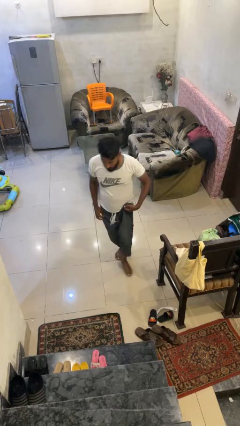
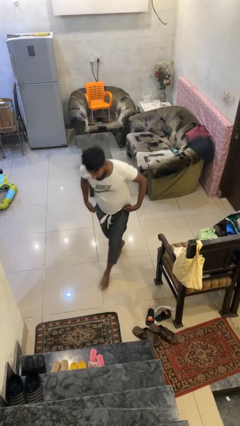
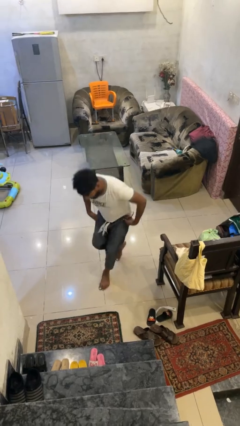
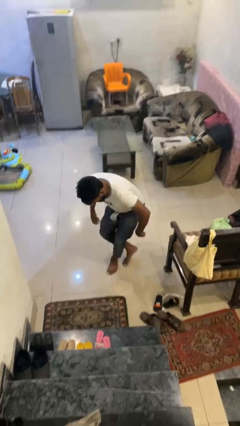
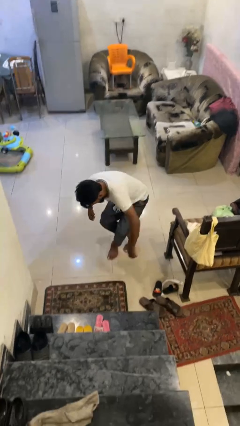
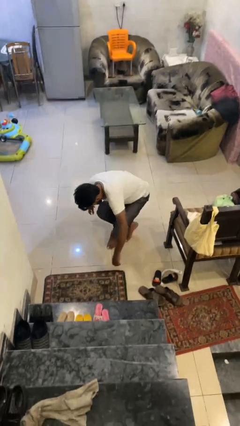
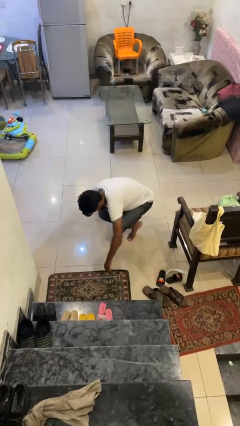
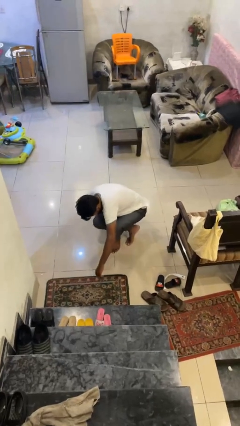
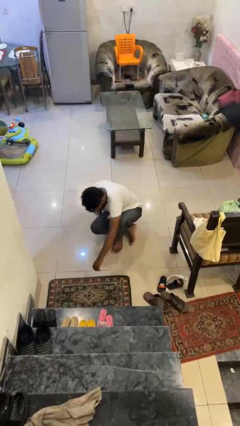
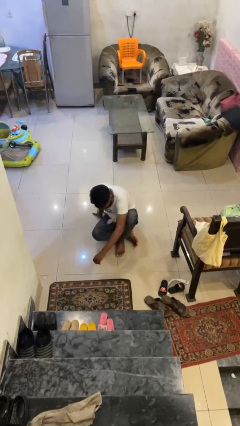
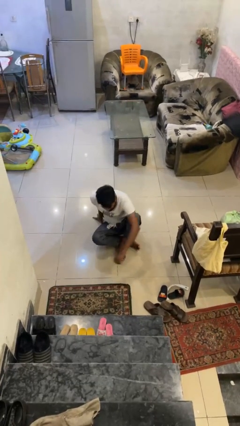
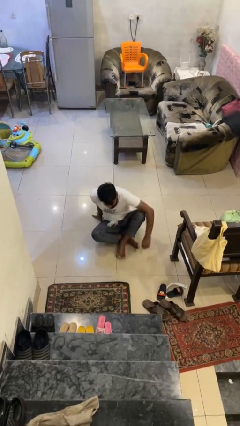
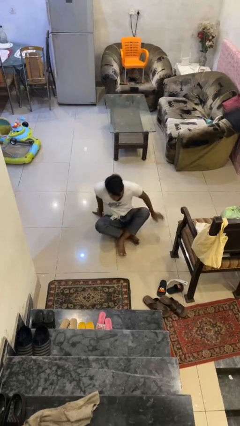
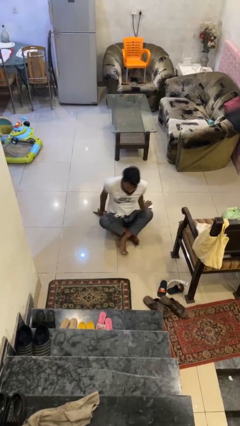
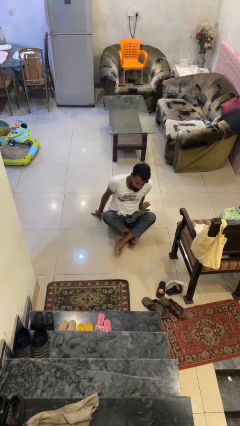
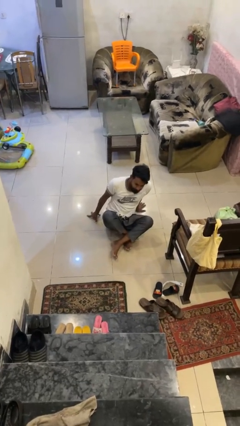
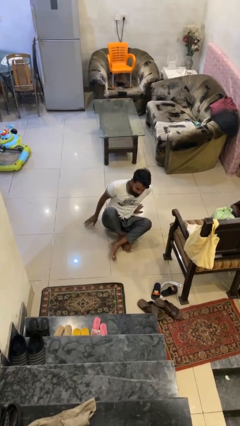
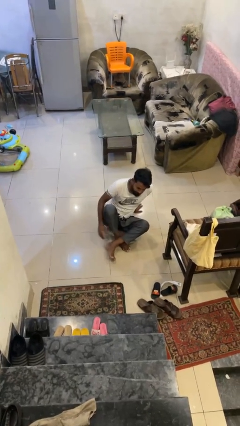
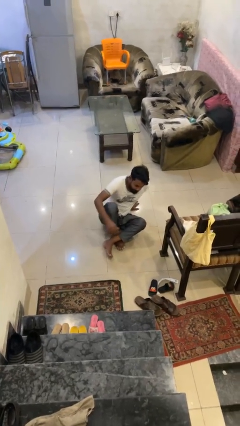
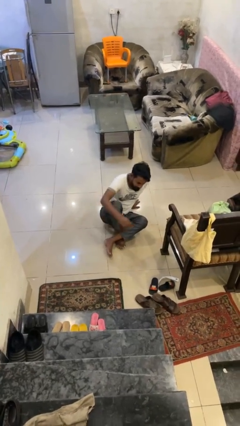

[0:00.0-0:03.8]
person sits crisscross

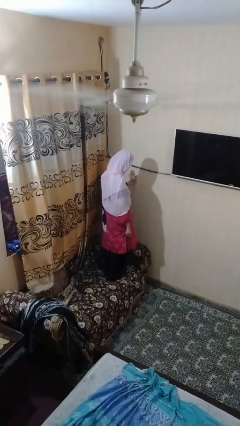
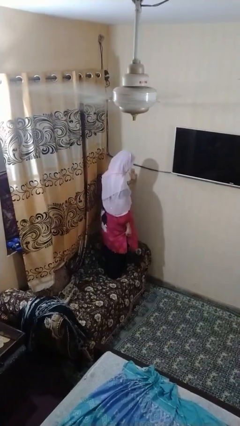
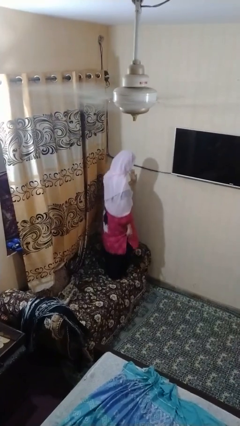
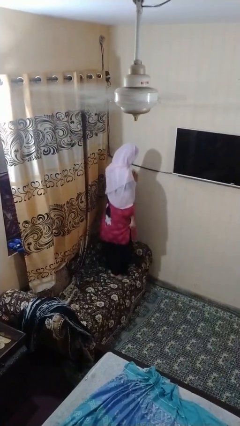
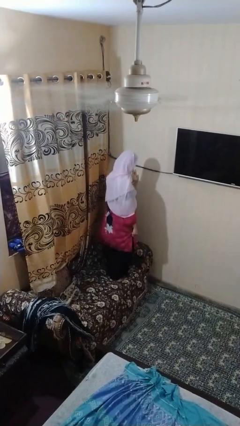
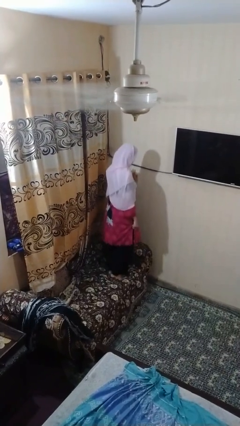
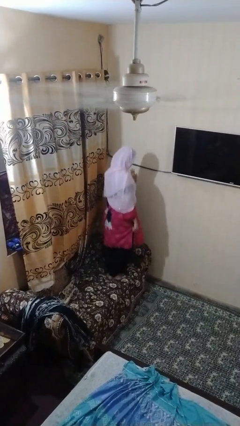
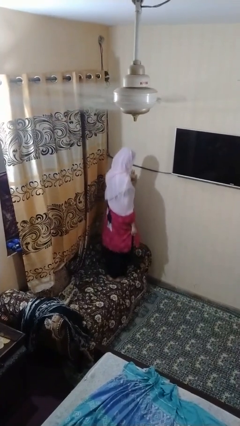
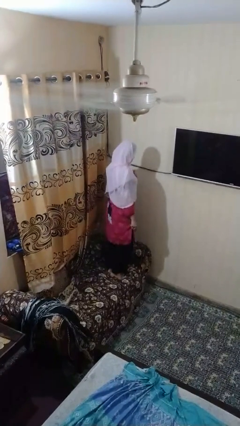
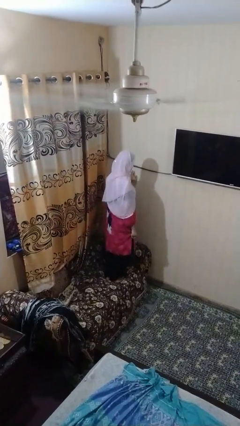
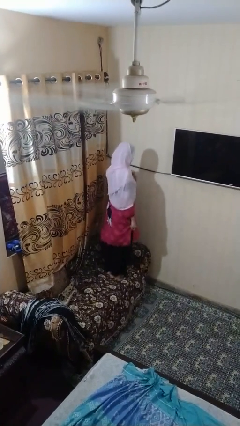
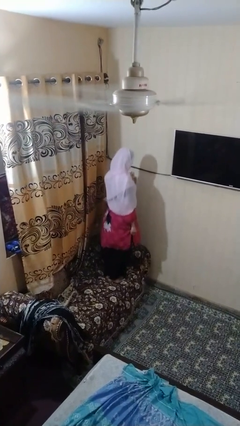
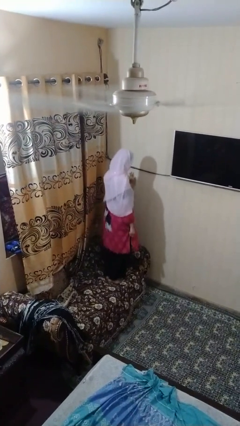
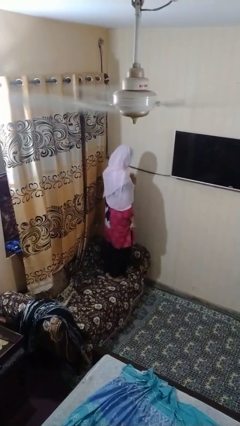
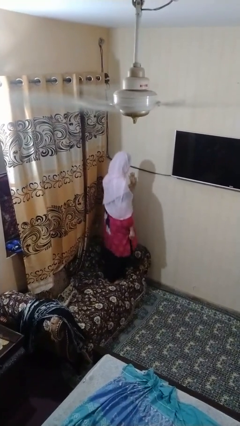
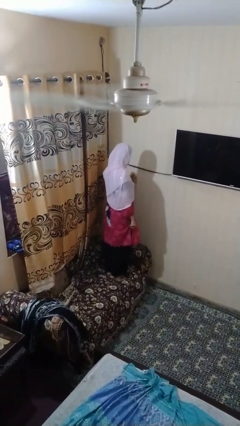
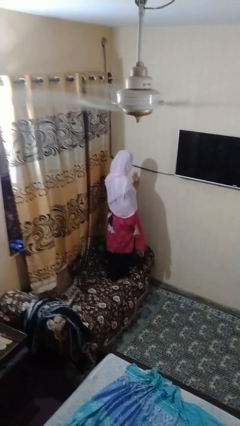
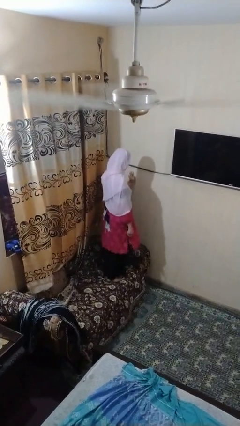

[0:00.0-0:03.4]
person jumps on couch

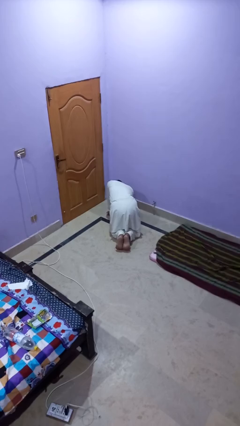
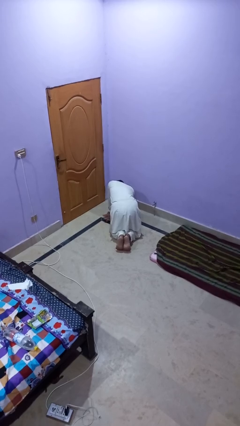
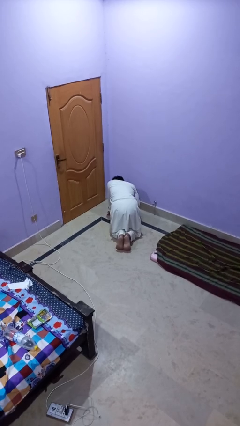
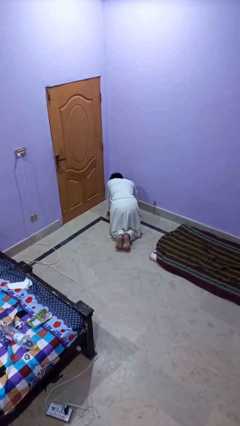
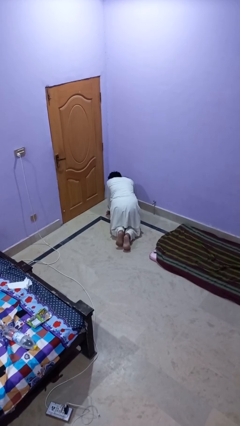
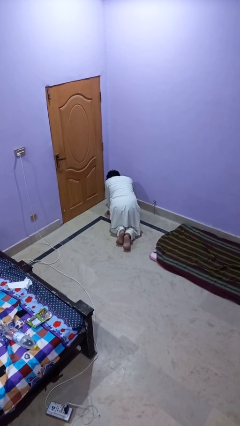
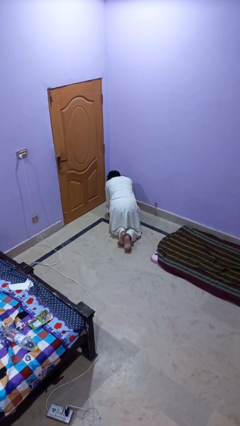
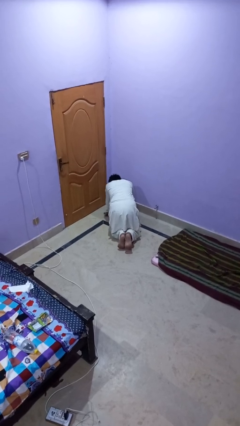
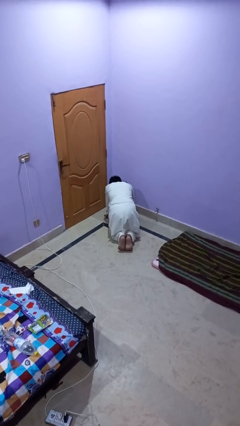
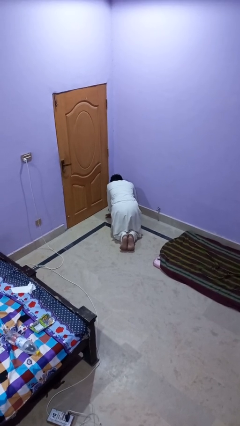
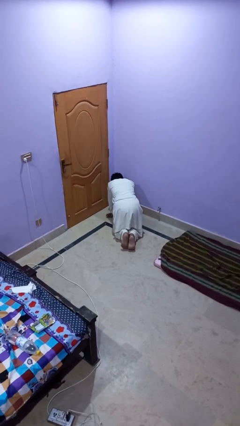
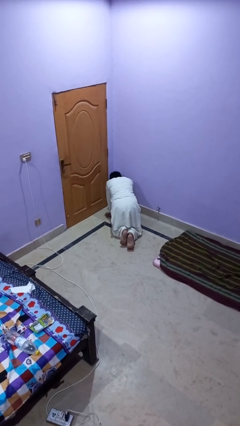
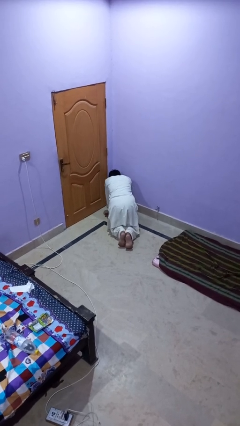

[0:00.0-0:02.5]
person crawls

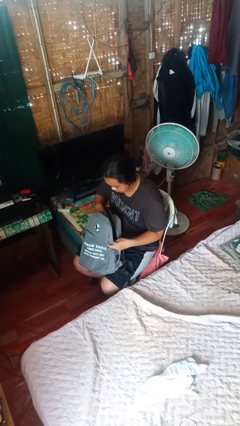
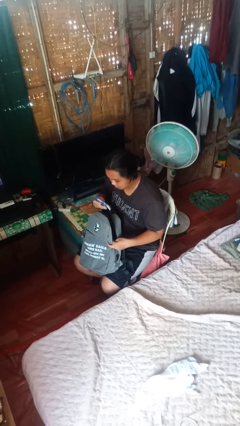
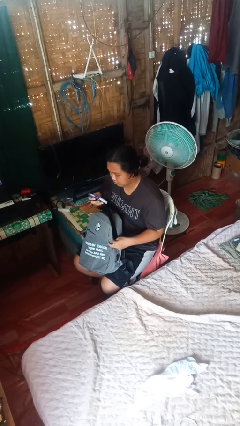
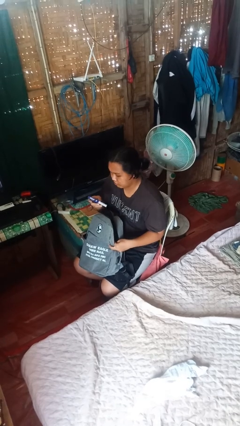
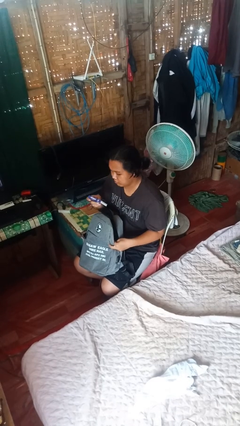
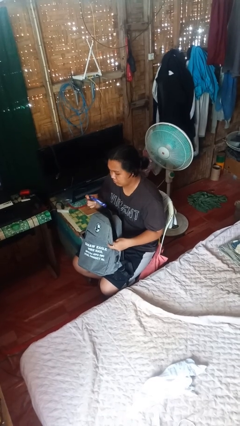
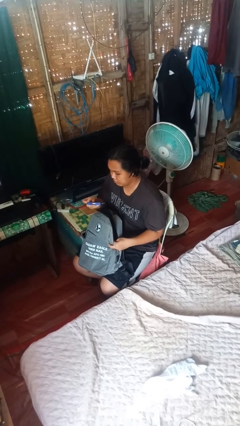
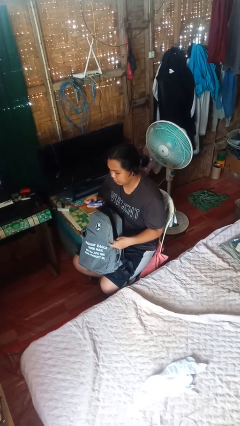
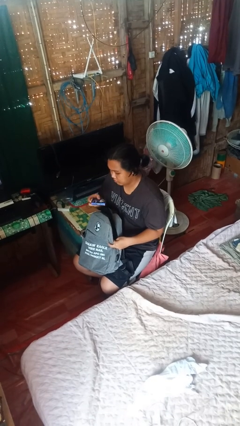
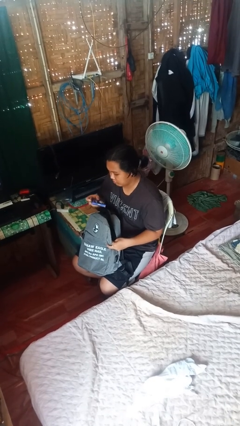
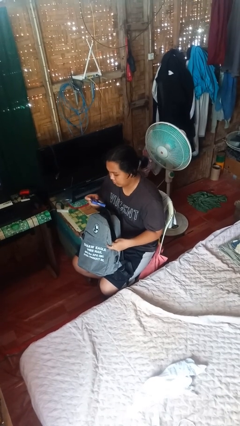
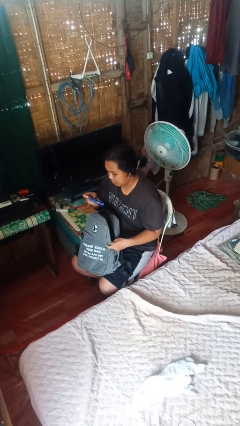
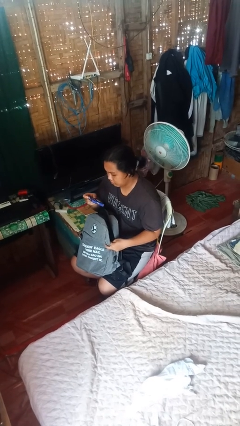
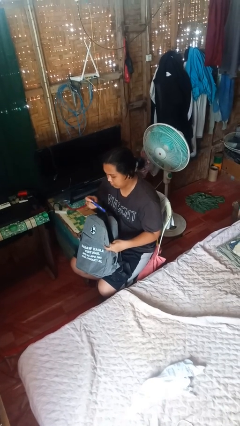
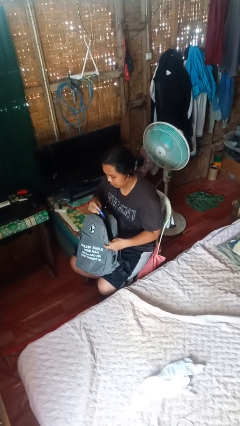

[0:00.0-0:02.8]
person takes object from backpack

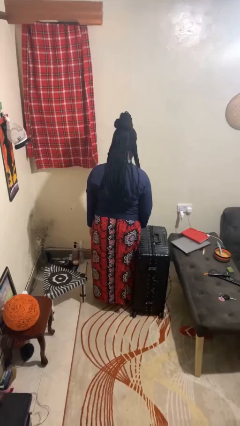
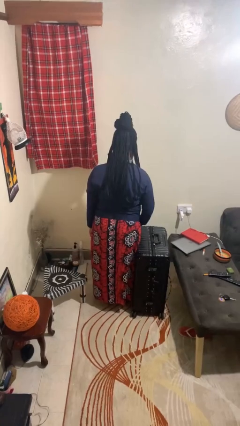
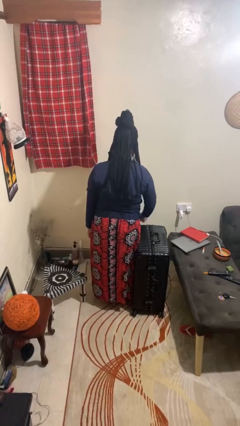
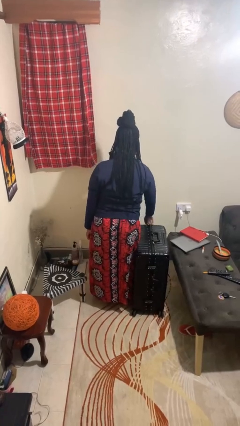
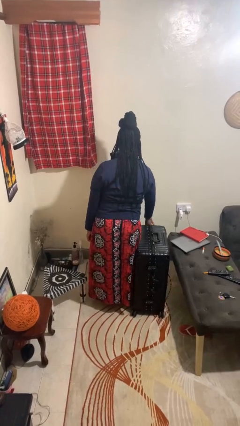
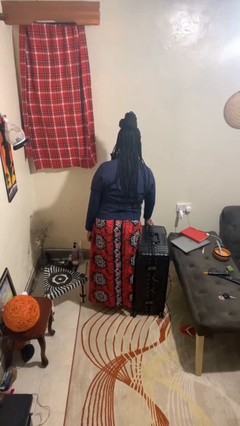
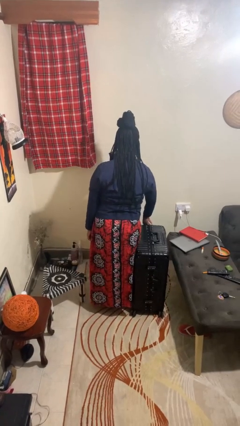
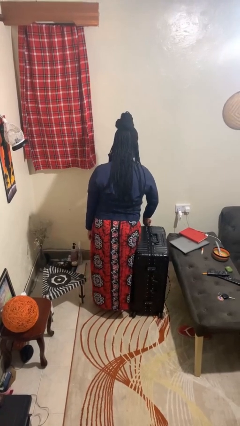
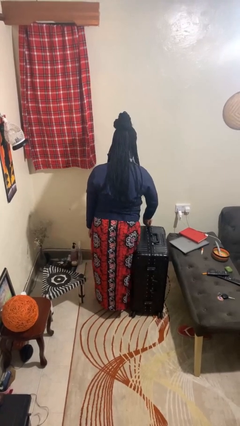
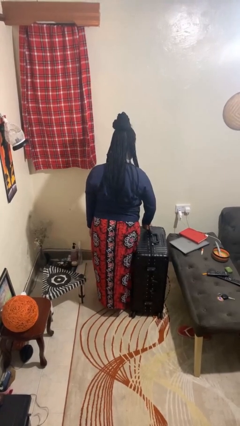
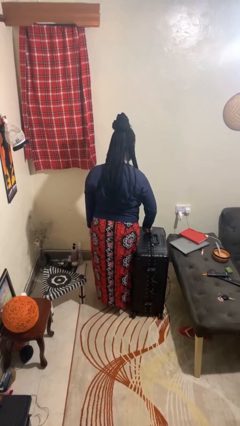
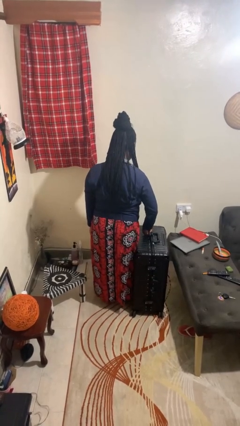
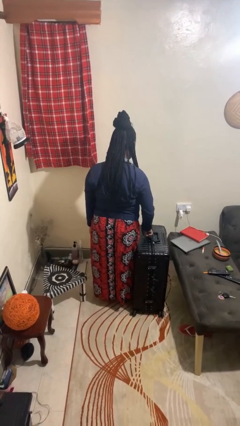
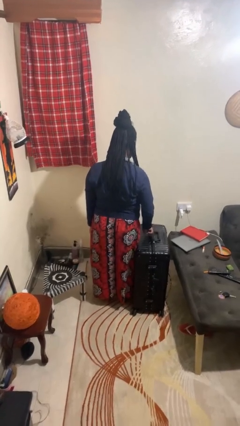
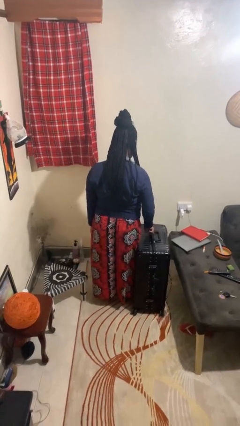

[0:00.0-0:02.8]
person opens suitcase

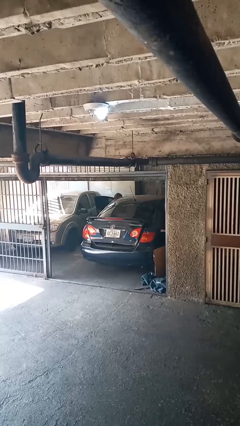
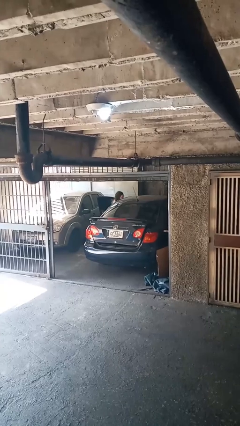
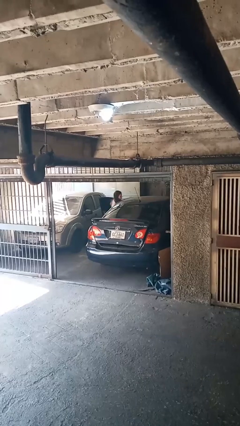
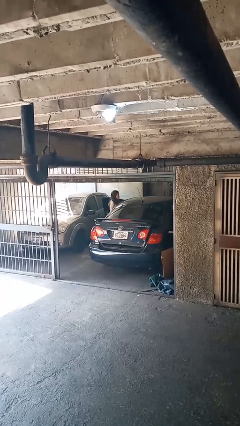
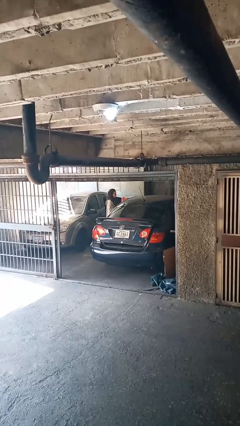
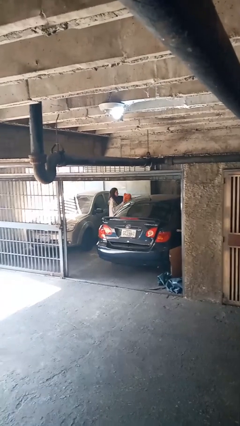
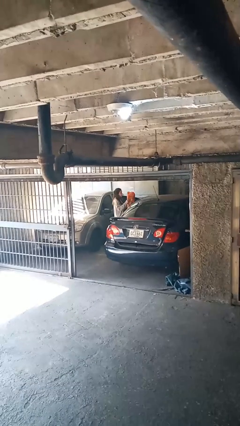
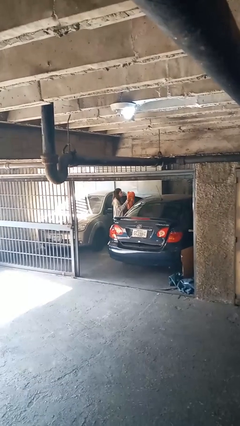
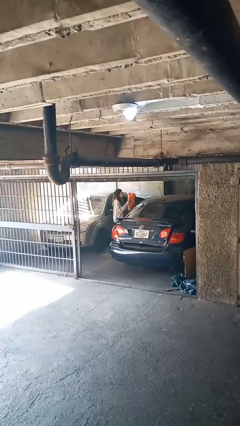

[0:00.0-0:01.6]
person unloads car

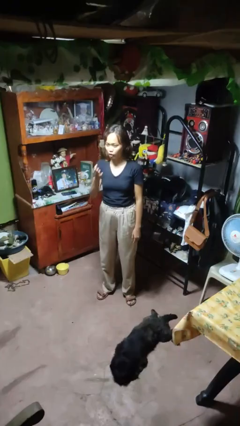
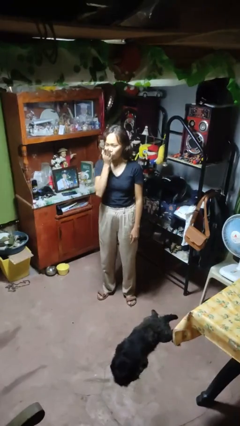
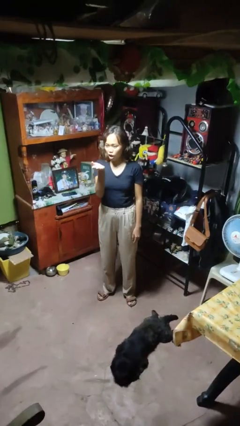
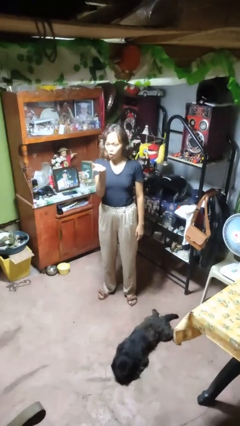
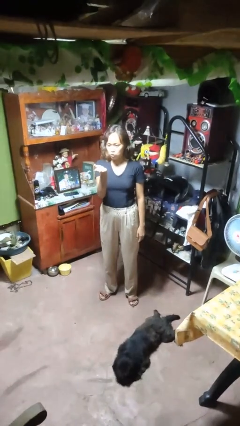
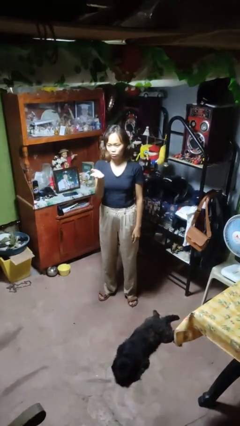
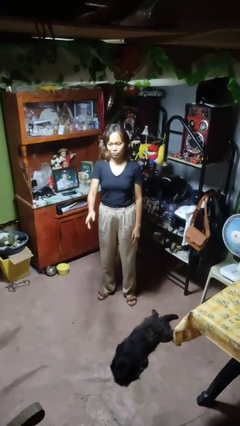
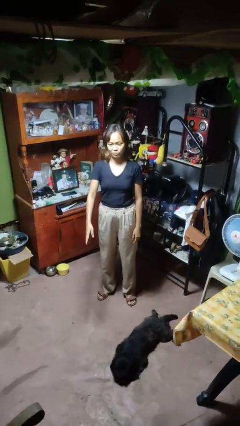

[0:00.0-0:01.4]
person gestures blow kiss
